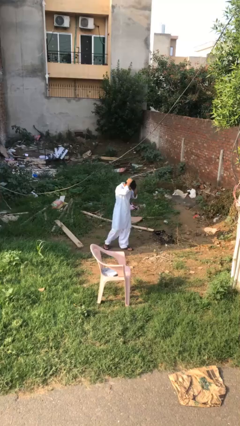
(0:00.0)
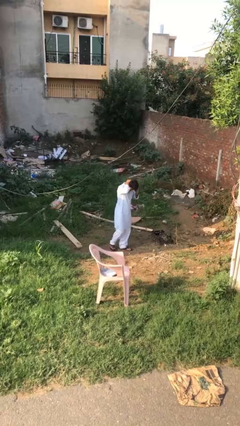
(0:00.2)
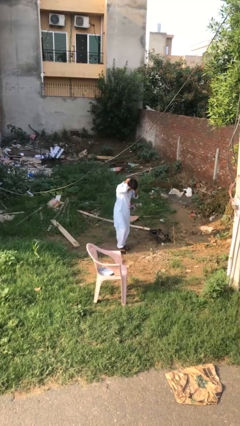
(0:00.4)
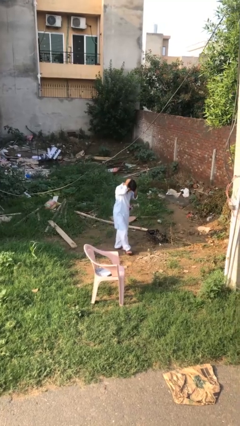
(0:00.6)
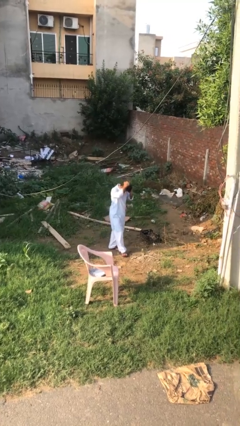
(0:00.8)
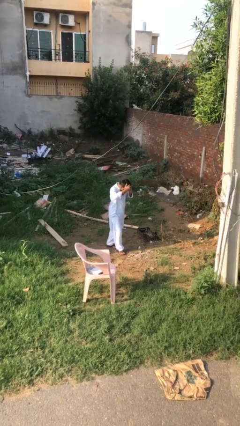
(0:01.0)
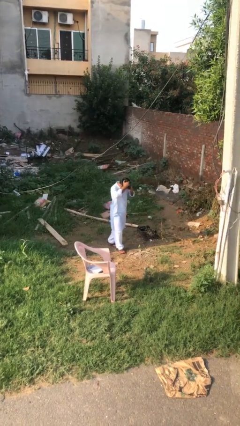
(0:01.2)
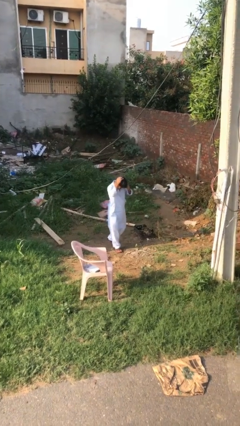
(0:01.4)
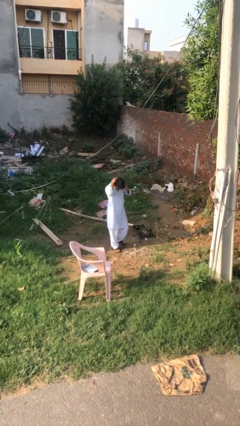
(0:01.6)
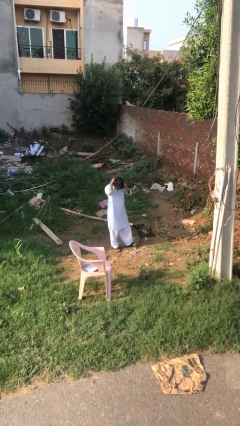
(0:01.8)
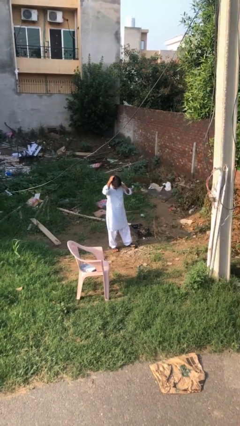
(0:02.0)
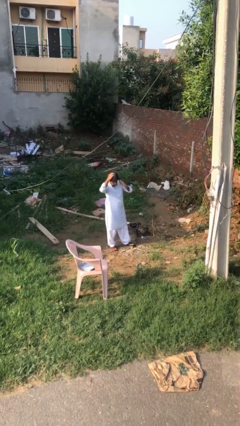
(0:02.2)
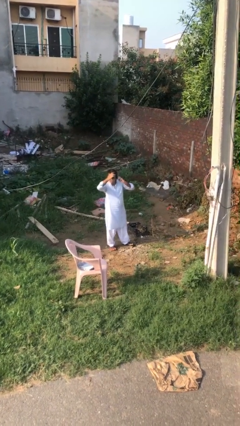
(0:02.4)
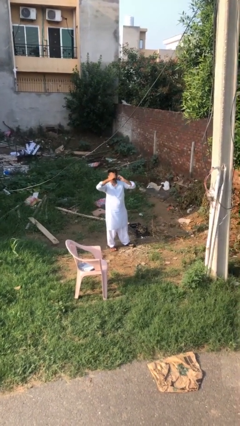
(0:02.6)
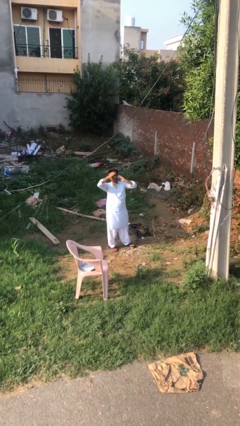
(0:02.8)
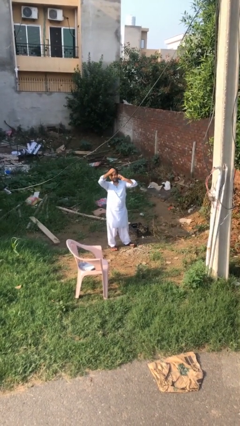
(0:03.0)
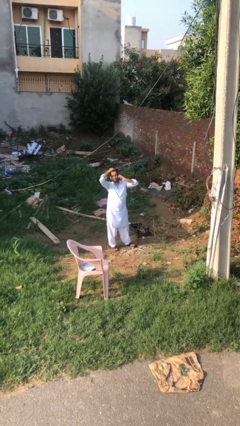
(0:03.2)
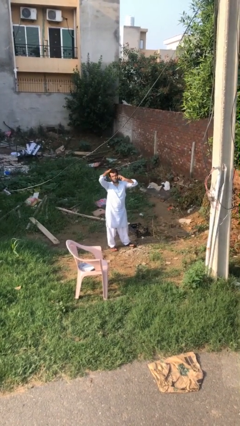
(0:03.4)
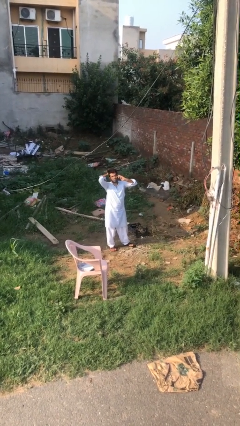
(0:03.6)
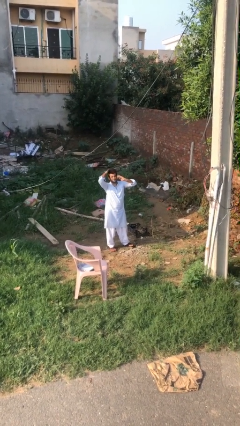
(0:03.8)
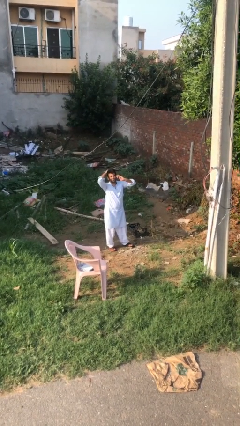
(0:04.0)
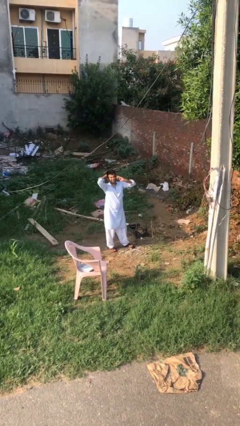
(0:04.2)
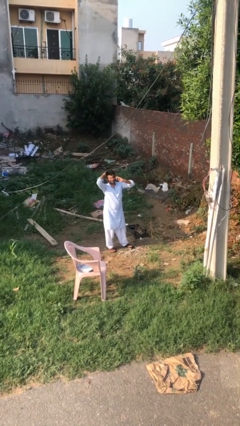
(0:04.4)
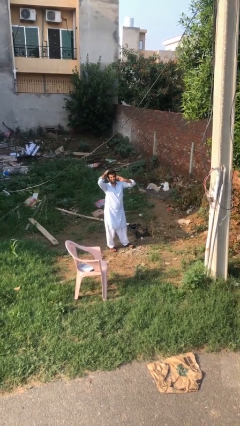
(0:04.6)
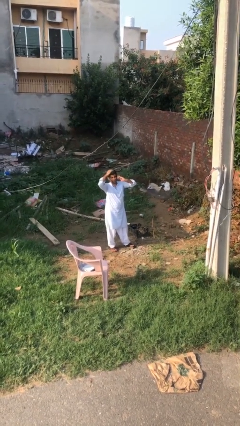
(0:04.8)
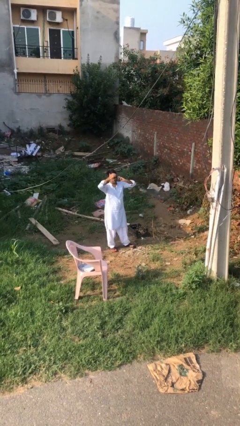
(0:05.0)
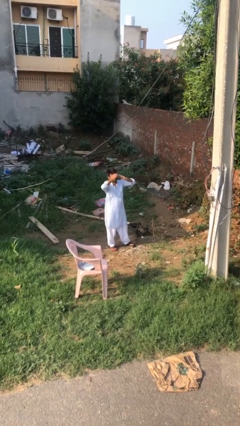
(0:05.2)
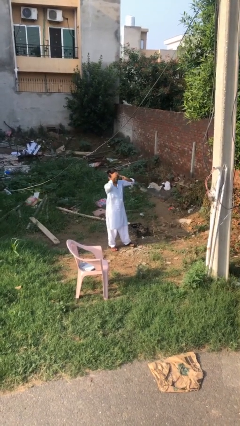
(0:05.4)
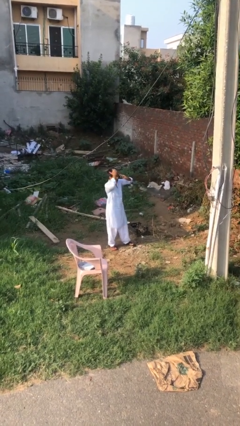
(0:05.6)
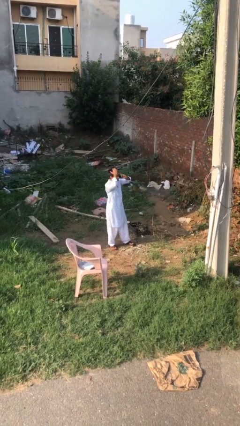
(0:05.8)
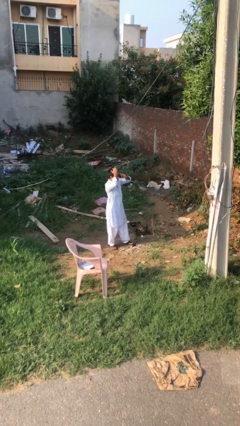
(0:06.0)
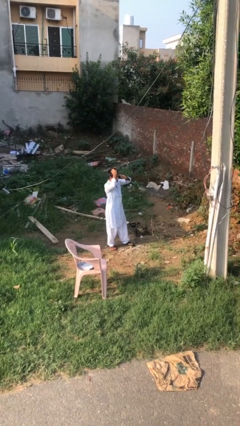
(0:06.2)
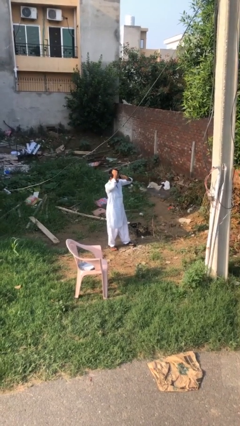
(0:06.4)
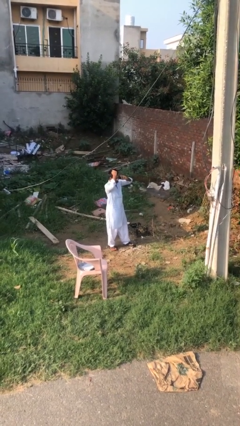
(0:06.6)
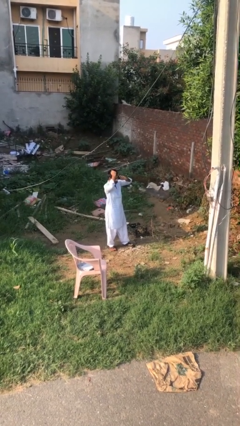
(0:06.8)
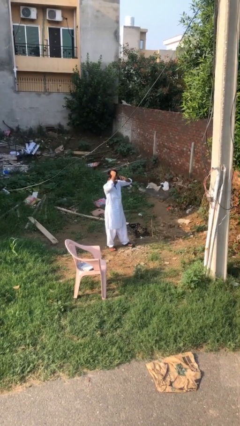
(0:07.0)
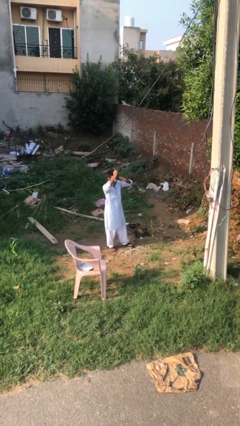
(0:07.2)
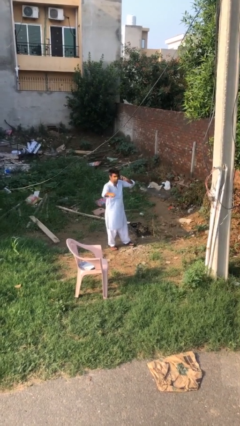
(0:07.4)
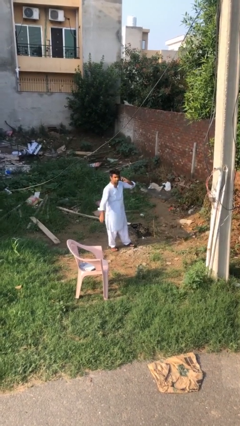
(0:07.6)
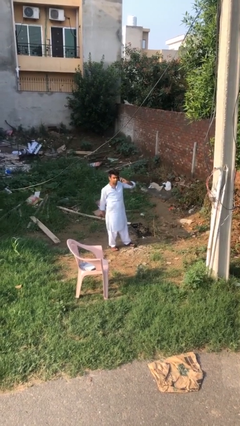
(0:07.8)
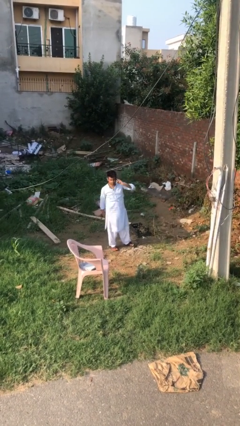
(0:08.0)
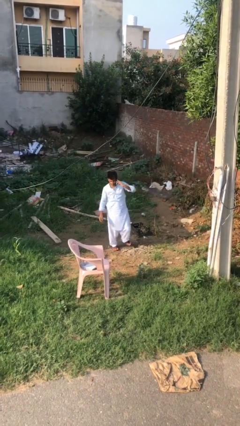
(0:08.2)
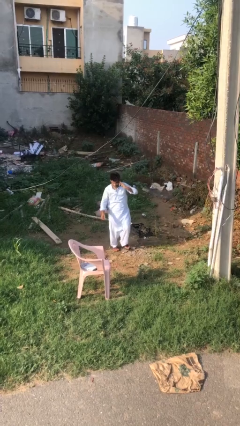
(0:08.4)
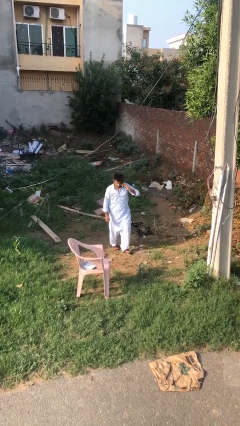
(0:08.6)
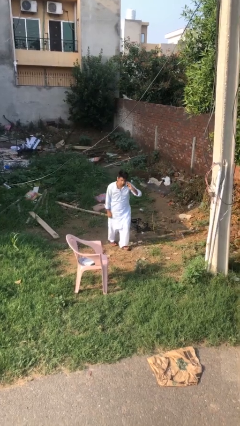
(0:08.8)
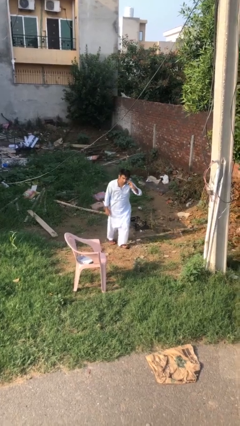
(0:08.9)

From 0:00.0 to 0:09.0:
person talks on phone

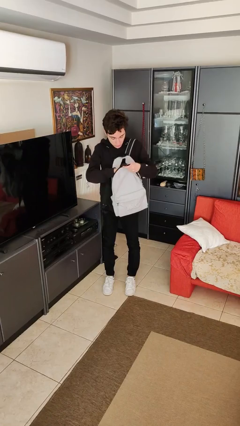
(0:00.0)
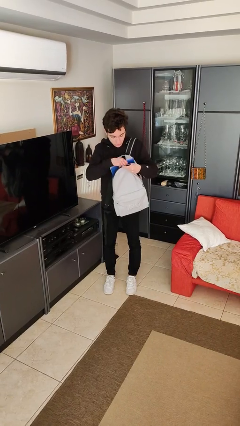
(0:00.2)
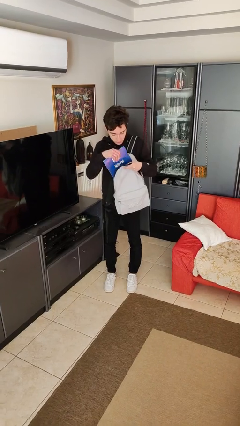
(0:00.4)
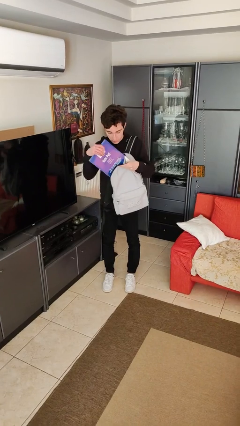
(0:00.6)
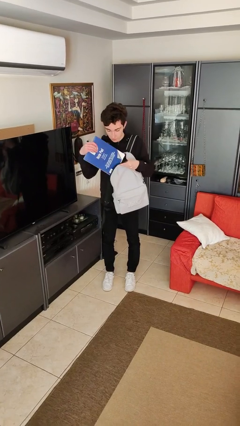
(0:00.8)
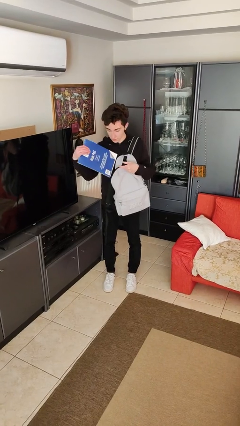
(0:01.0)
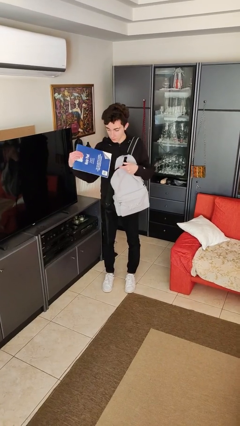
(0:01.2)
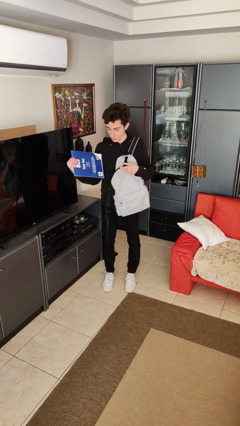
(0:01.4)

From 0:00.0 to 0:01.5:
person takes object from backpack

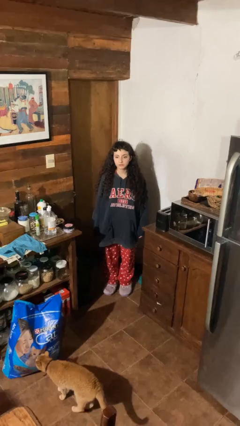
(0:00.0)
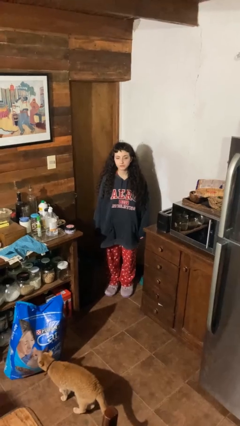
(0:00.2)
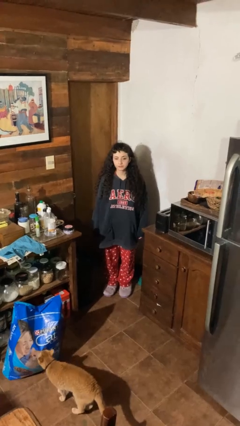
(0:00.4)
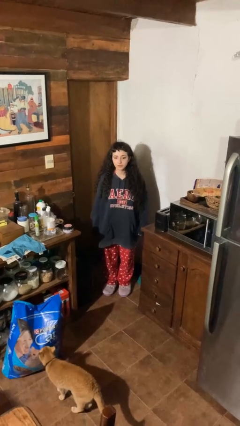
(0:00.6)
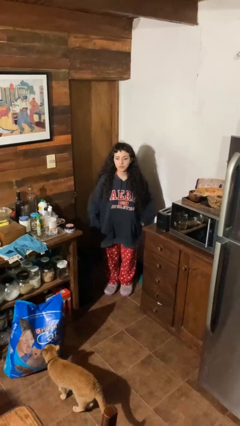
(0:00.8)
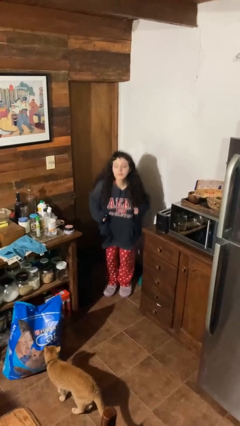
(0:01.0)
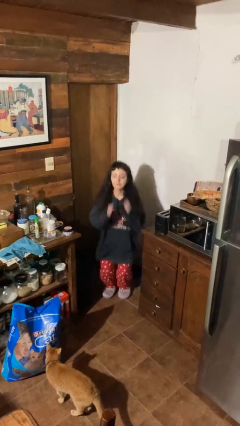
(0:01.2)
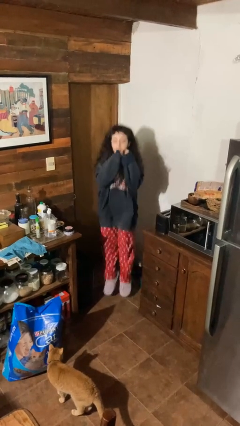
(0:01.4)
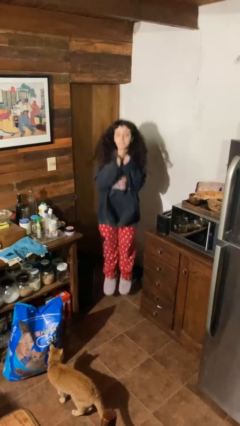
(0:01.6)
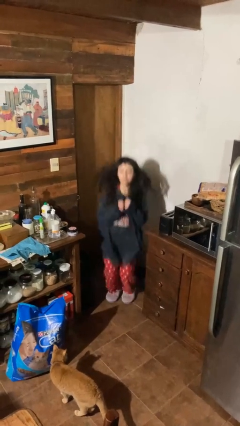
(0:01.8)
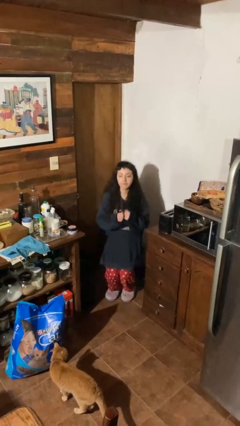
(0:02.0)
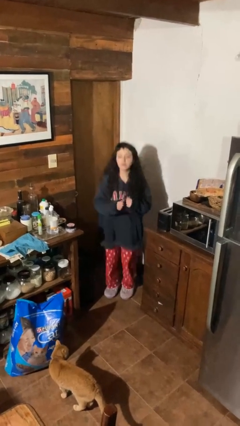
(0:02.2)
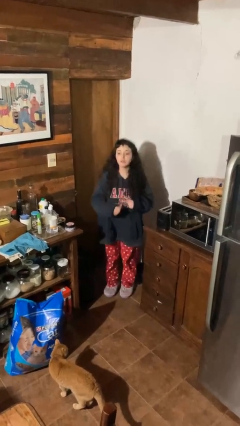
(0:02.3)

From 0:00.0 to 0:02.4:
person jumps

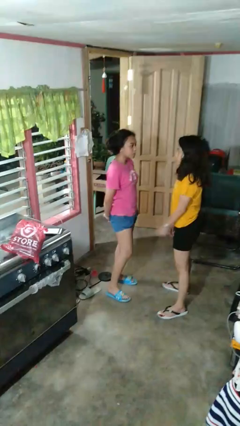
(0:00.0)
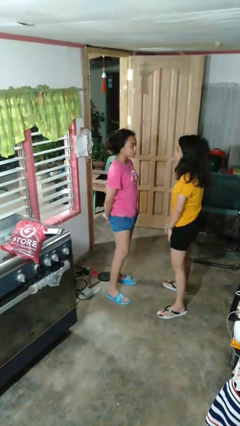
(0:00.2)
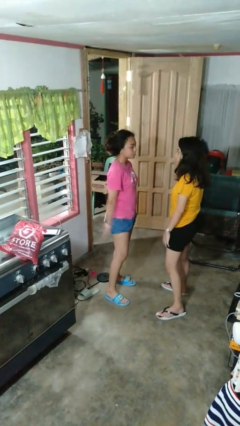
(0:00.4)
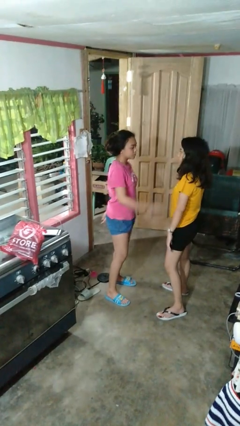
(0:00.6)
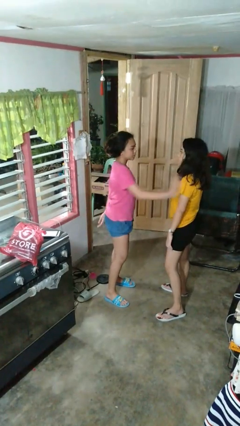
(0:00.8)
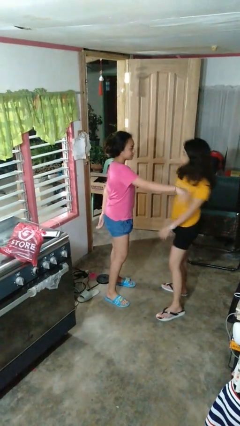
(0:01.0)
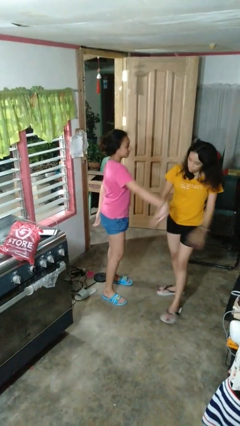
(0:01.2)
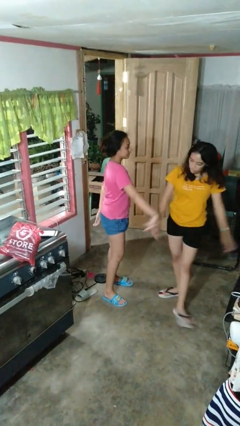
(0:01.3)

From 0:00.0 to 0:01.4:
person shoves person

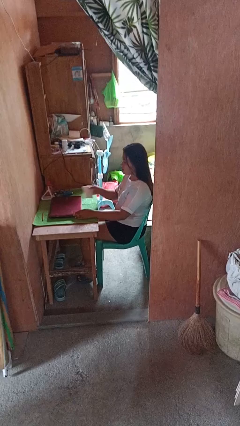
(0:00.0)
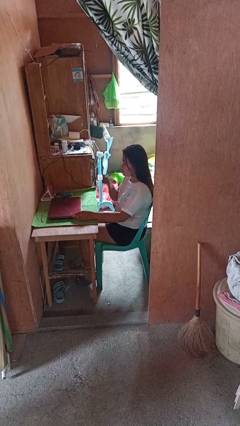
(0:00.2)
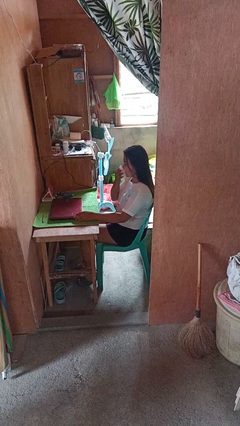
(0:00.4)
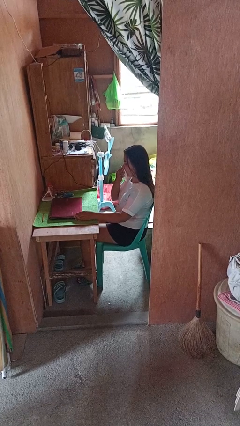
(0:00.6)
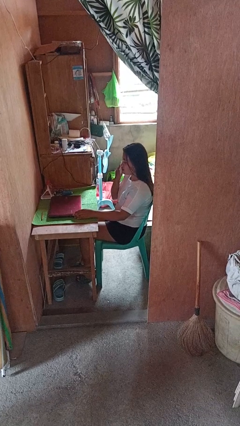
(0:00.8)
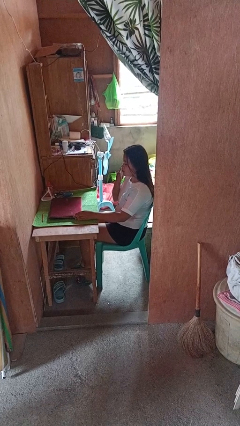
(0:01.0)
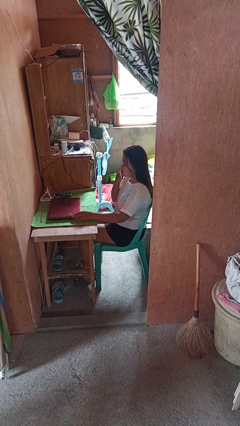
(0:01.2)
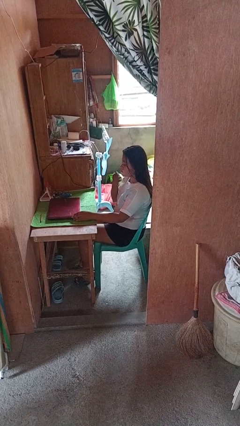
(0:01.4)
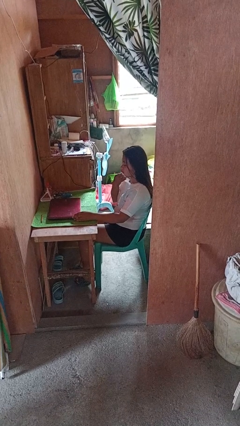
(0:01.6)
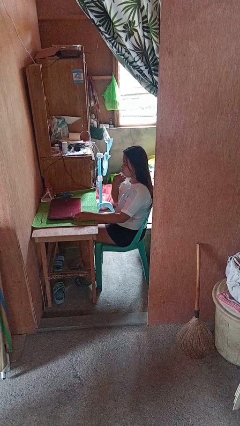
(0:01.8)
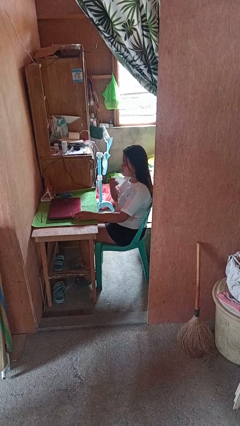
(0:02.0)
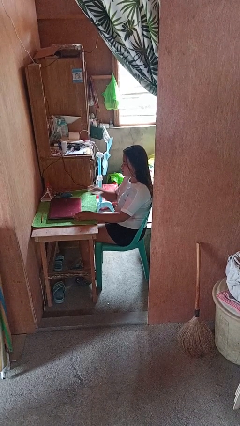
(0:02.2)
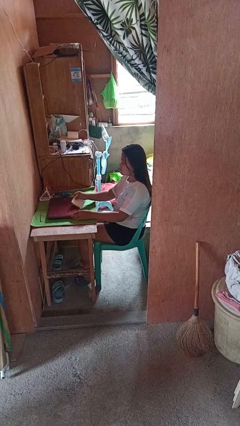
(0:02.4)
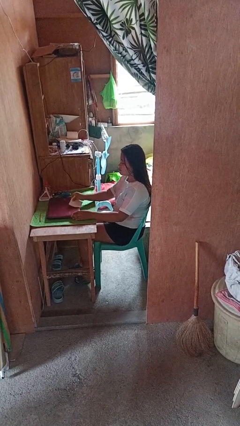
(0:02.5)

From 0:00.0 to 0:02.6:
person wipes mouth with napkin

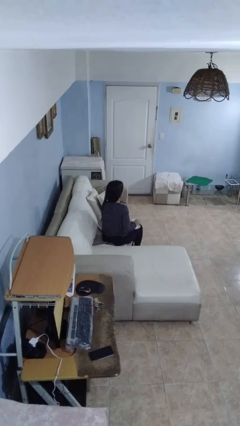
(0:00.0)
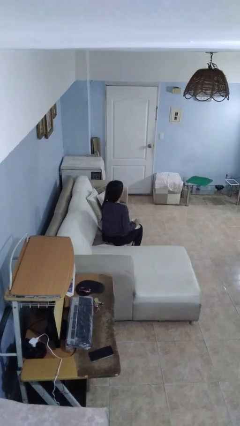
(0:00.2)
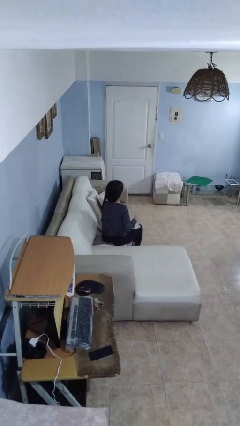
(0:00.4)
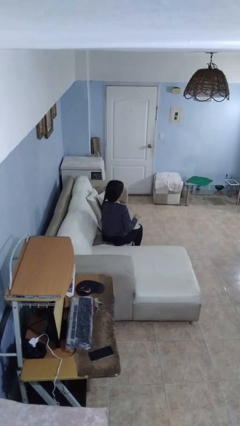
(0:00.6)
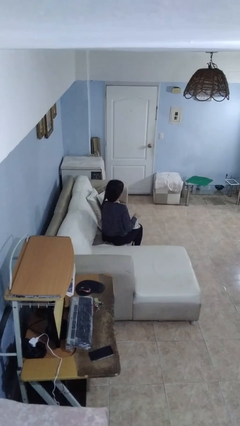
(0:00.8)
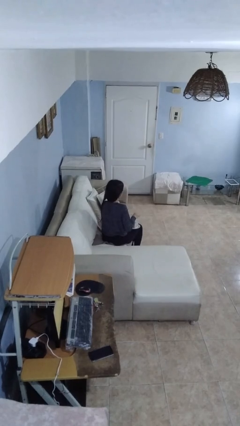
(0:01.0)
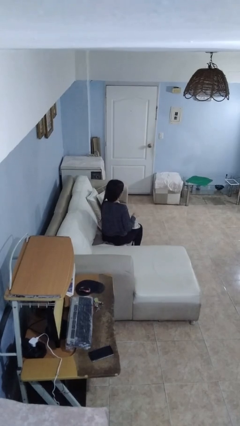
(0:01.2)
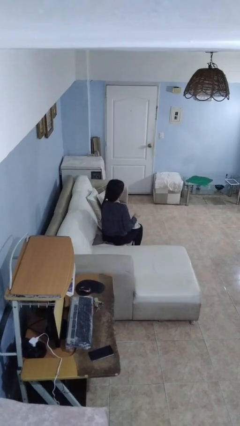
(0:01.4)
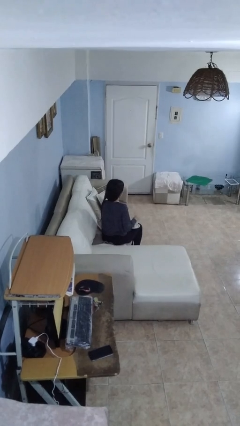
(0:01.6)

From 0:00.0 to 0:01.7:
person stirs mug
